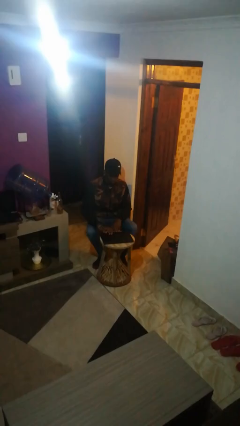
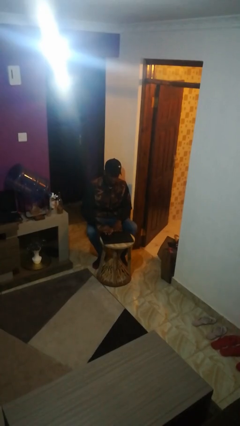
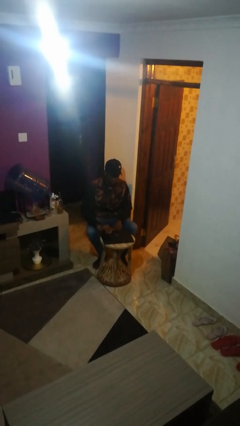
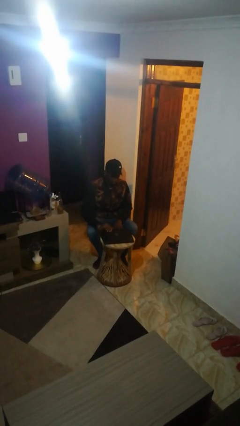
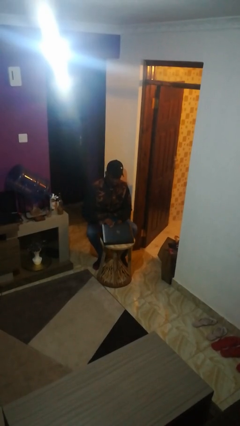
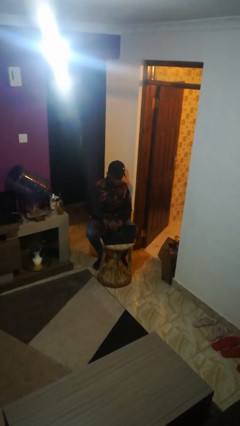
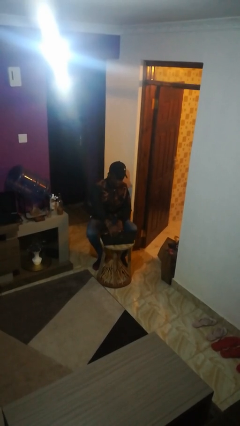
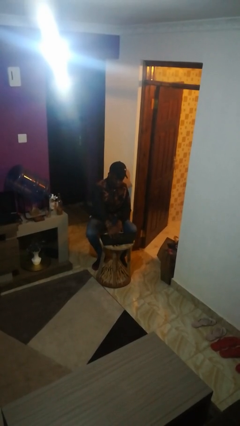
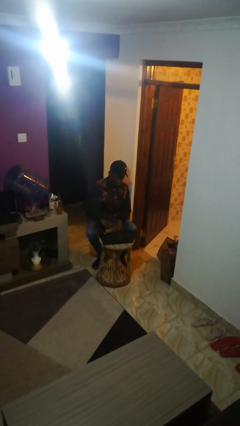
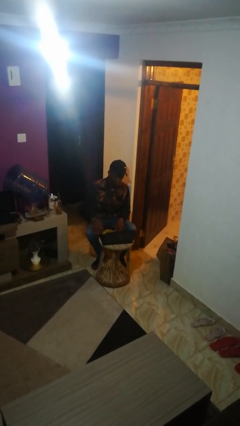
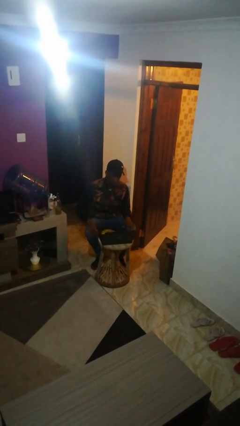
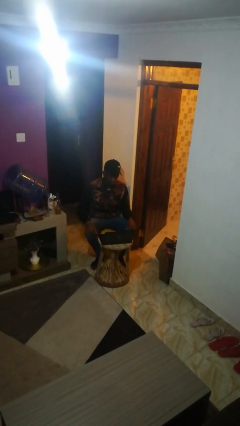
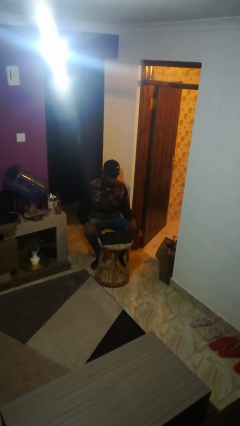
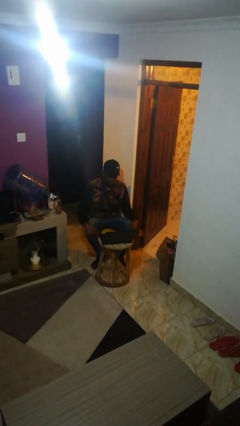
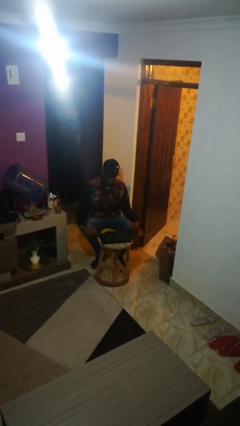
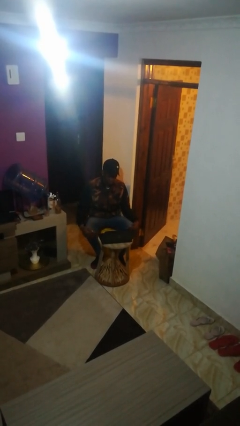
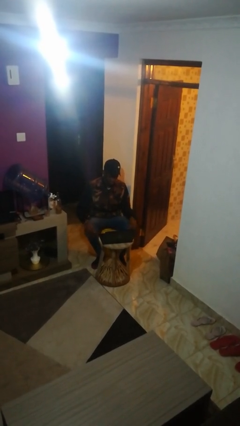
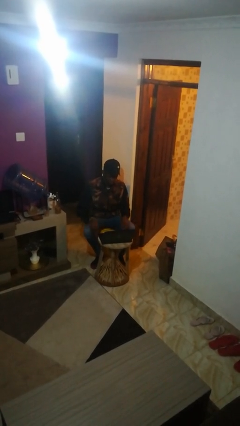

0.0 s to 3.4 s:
person opens laptop

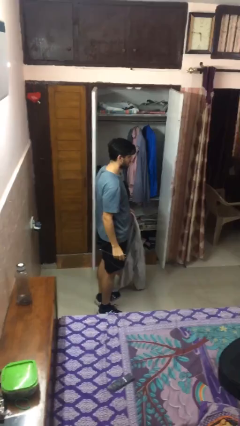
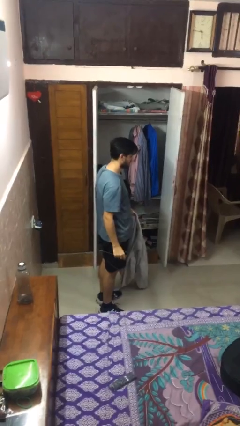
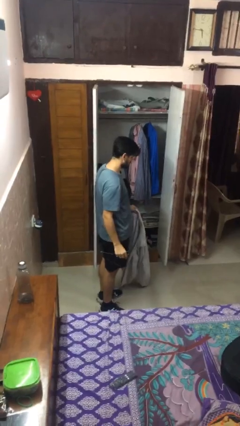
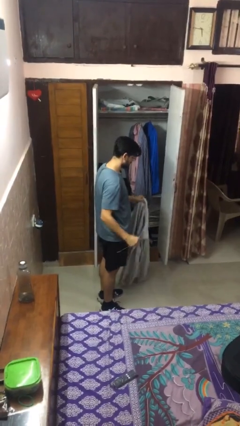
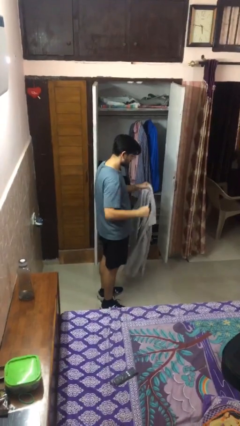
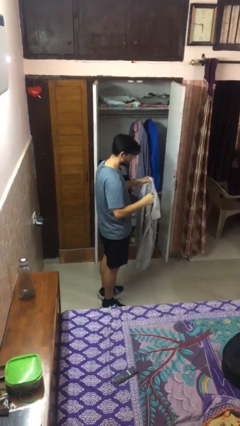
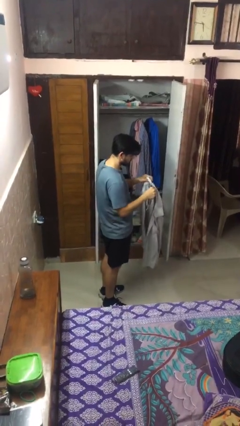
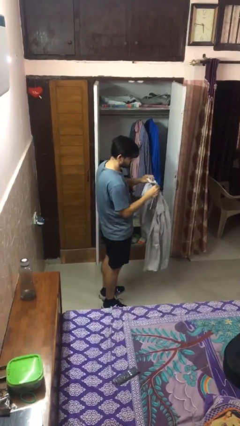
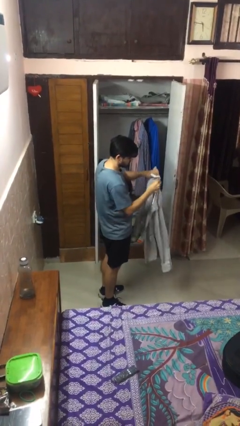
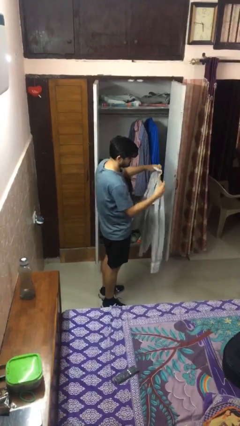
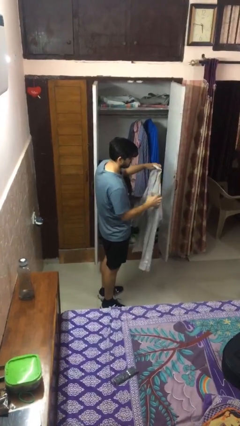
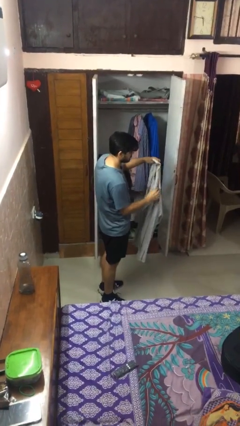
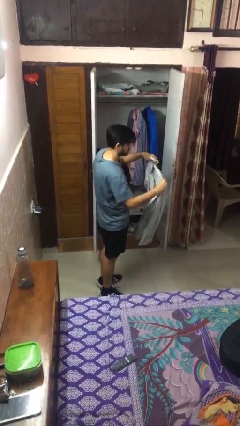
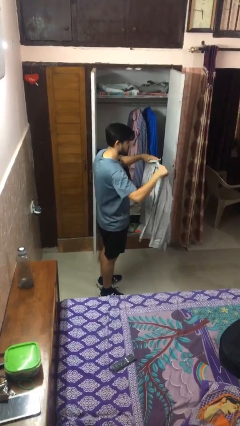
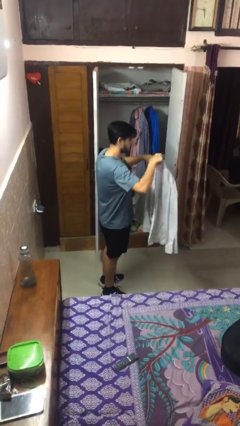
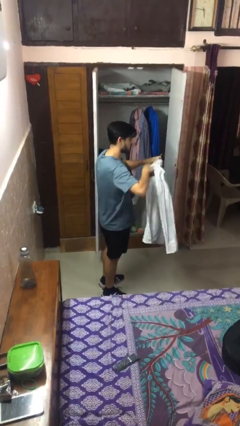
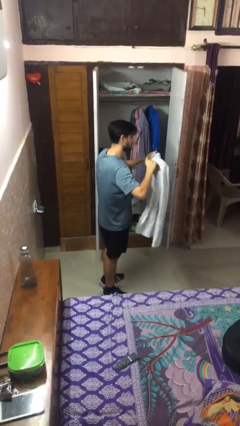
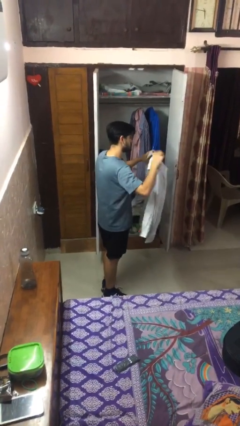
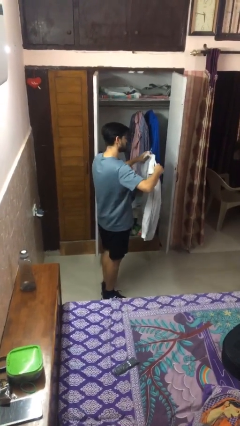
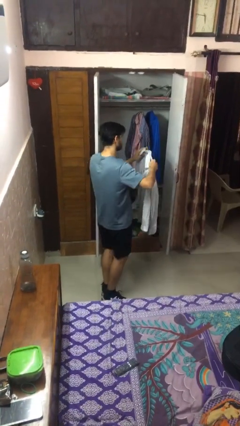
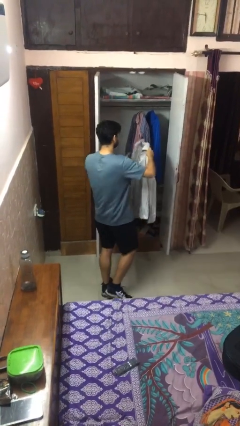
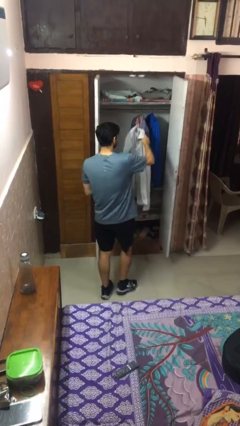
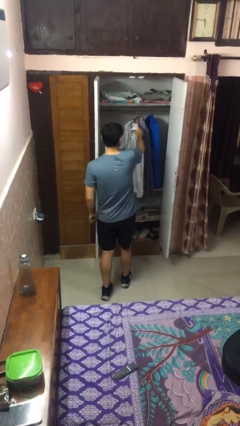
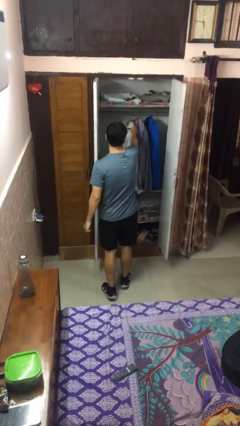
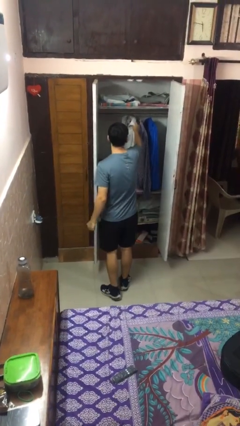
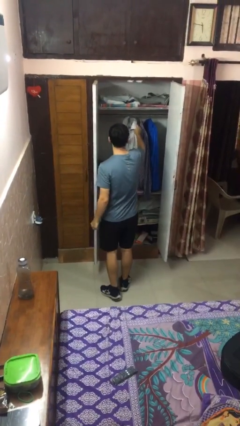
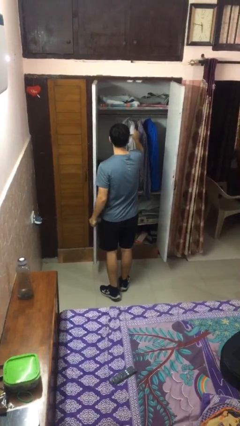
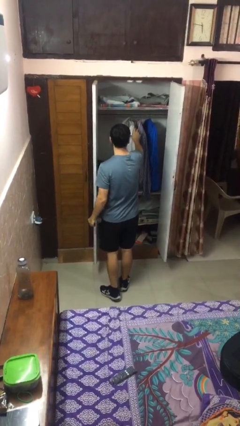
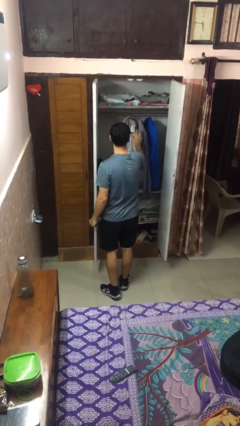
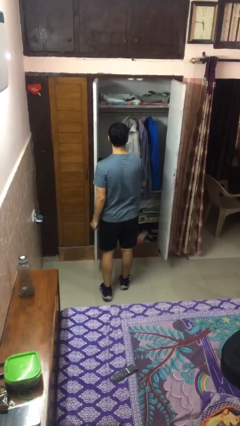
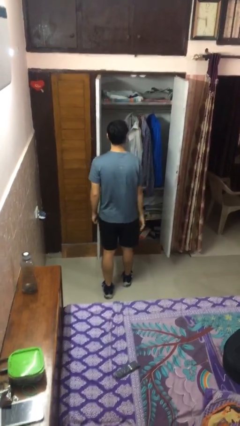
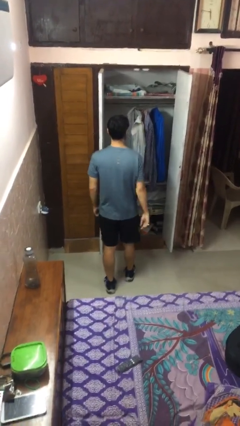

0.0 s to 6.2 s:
person puts clothes into closet

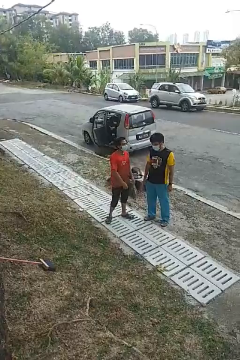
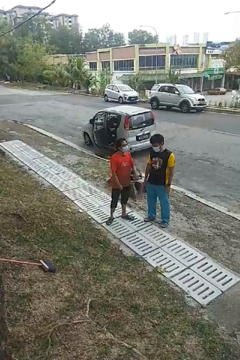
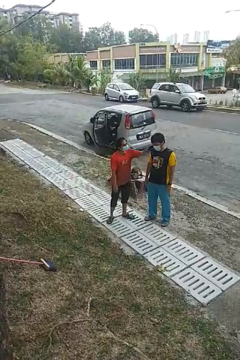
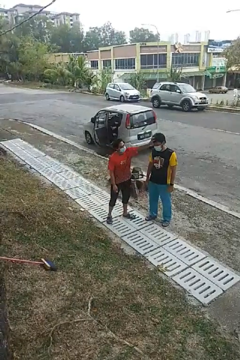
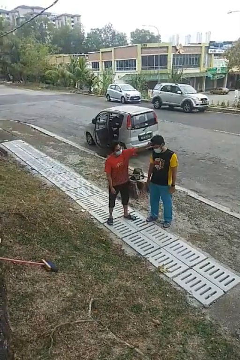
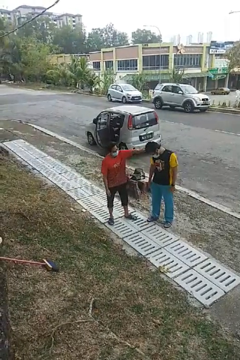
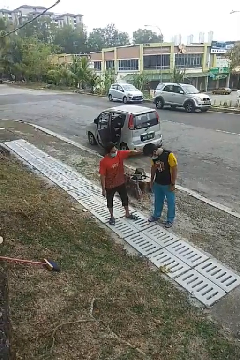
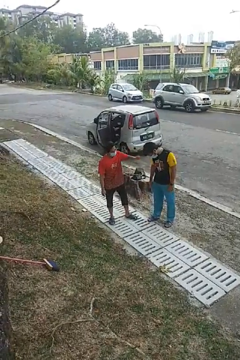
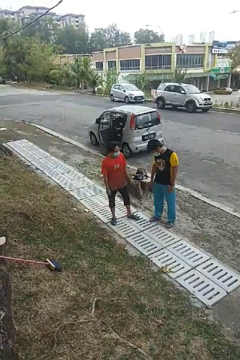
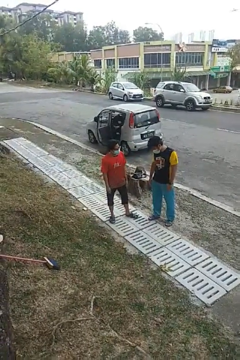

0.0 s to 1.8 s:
person grabs person by hair

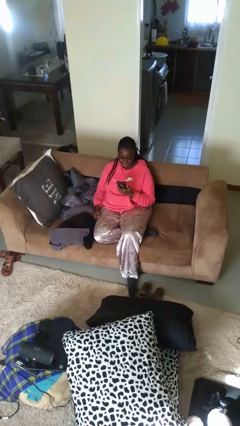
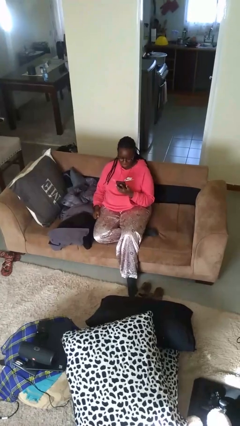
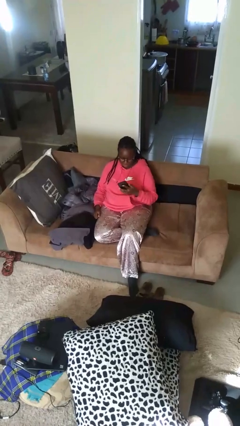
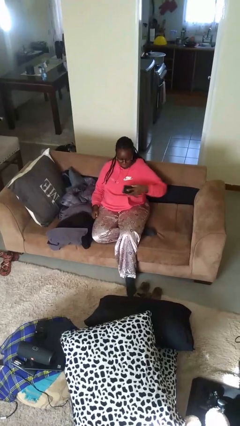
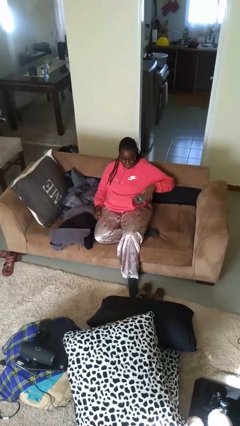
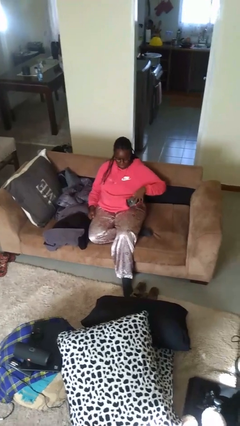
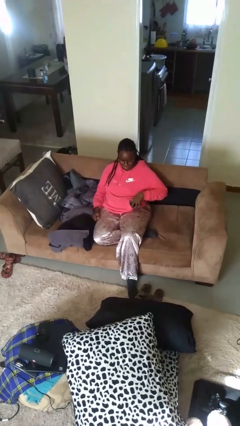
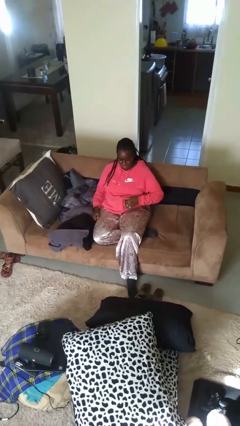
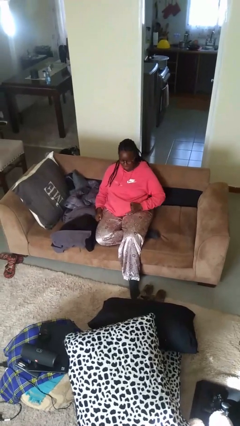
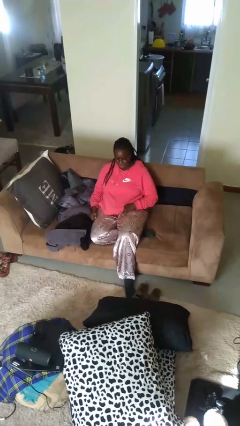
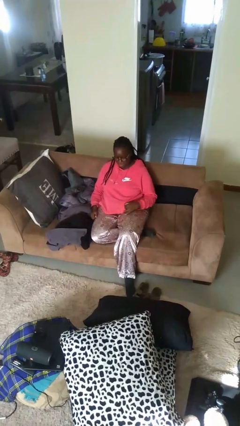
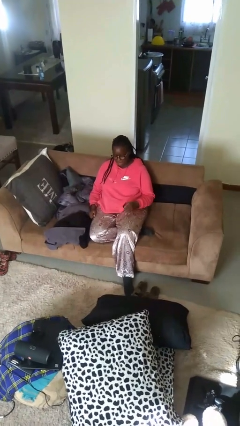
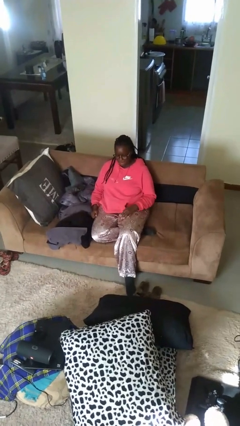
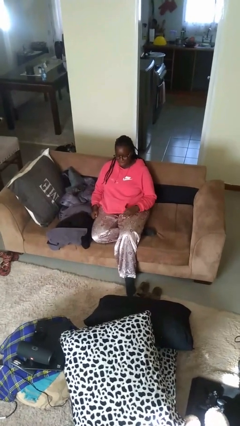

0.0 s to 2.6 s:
person puts phone into pocket

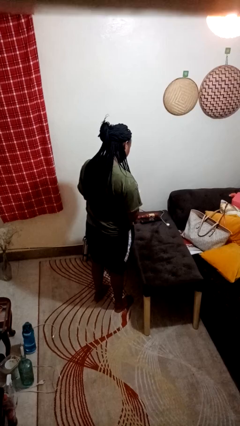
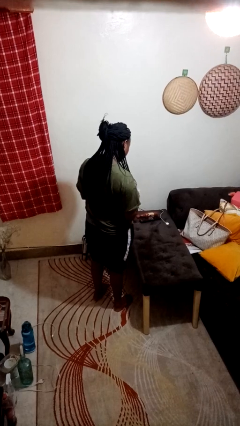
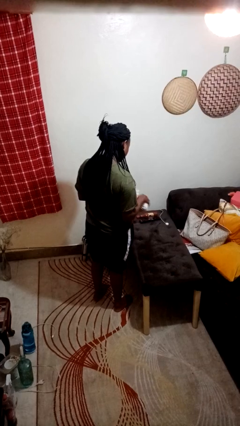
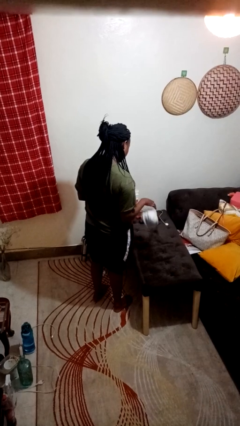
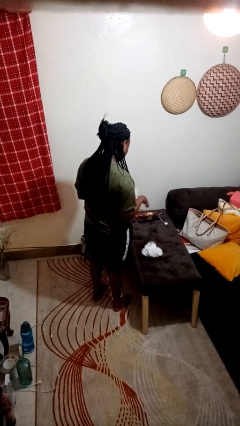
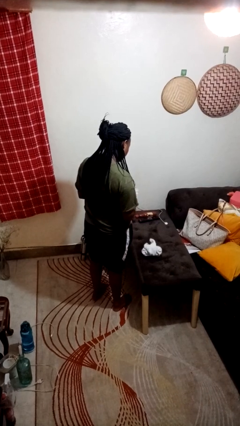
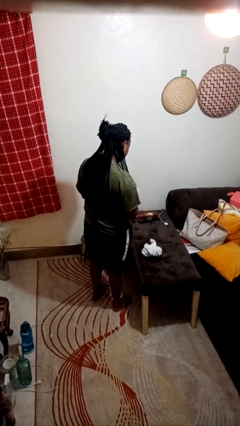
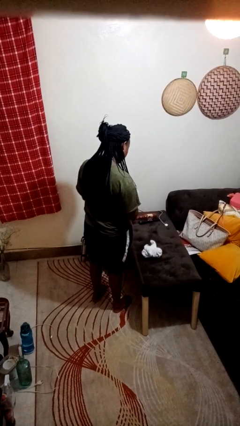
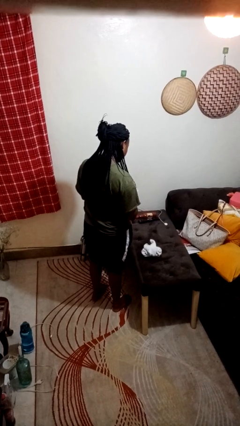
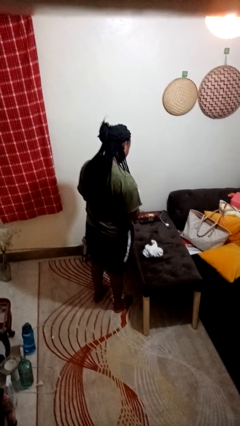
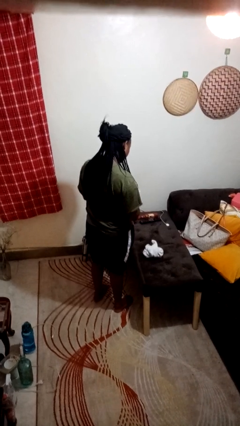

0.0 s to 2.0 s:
person throws object on table

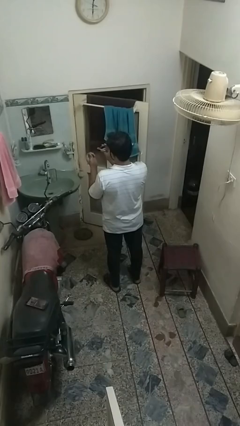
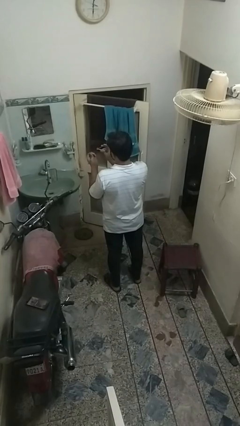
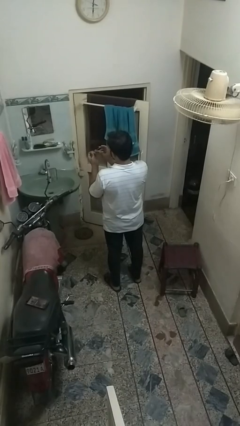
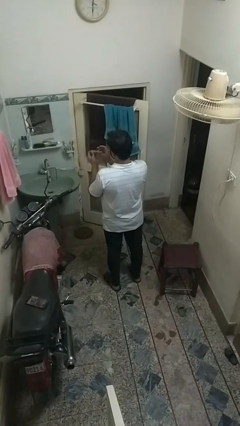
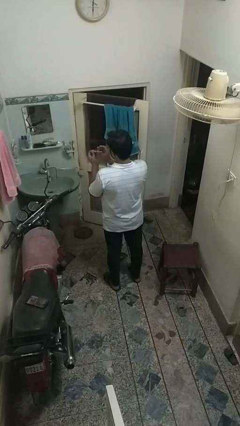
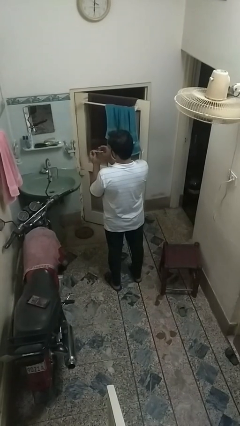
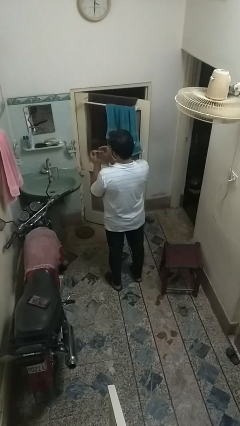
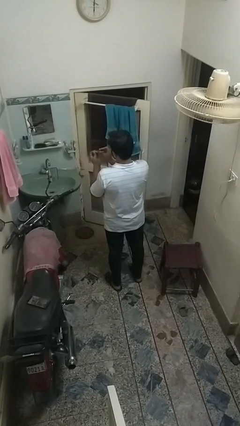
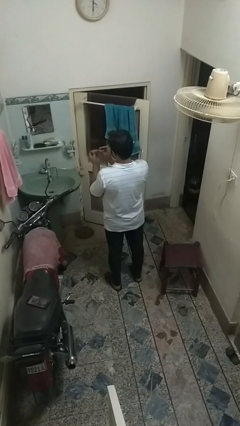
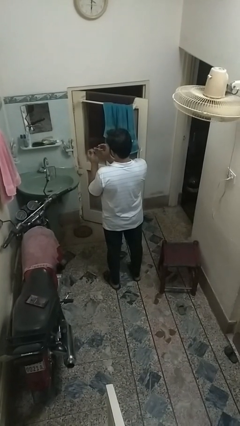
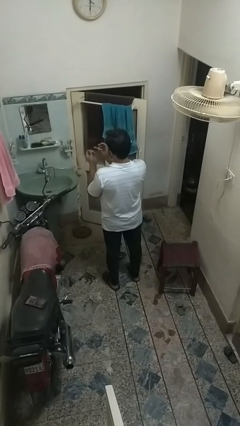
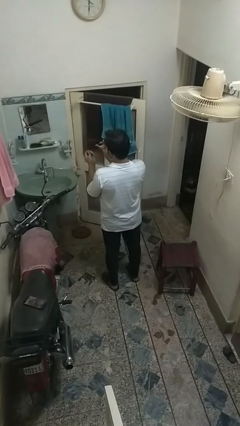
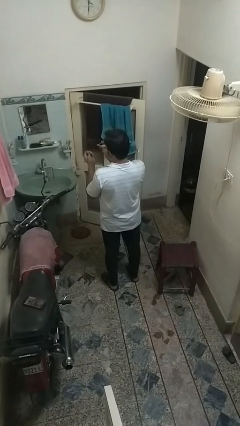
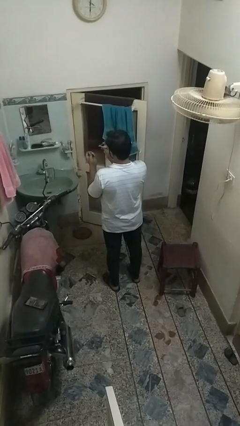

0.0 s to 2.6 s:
person clips fingernails
